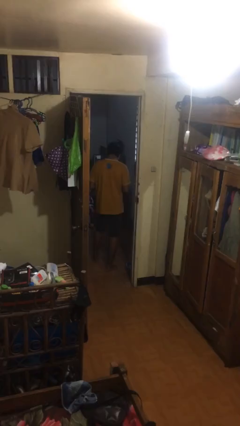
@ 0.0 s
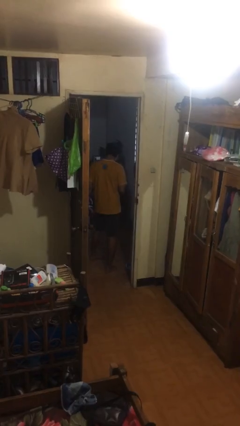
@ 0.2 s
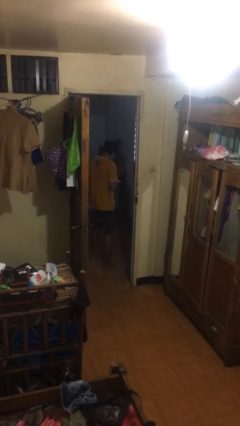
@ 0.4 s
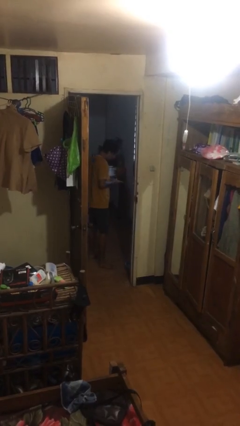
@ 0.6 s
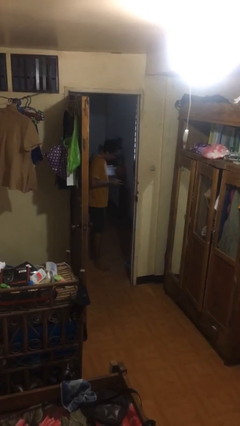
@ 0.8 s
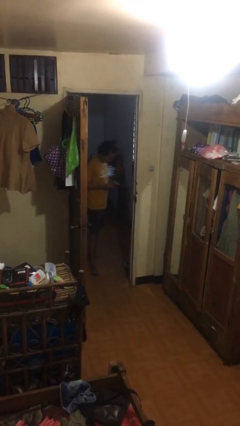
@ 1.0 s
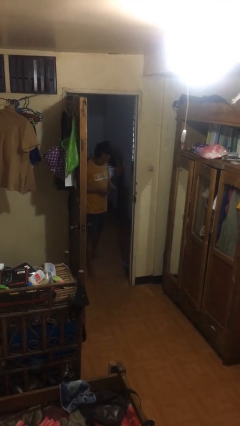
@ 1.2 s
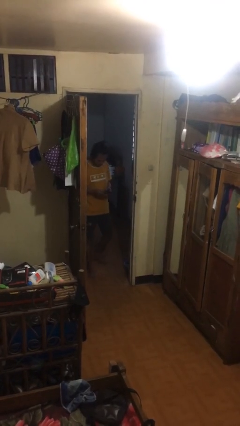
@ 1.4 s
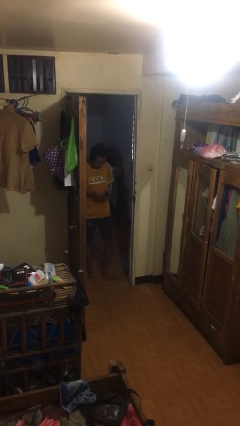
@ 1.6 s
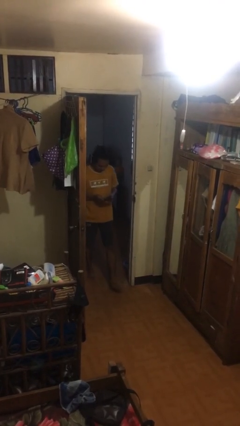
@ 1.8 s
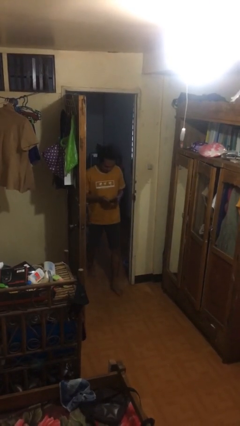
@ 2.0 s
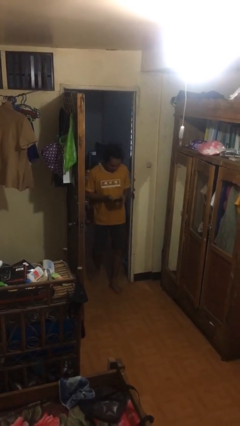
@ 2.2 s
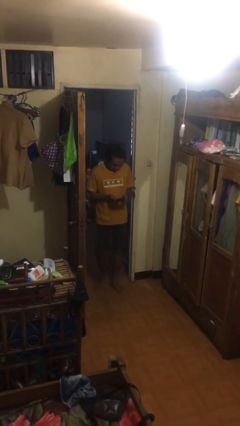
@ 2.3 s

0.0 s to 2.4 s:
person enters scene through structure

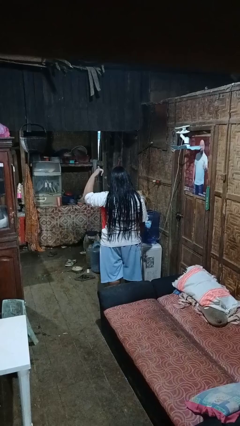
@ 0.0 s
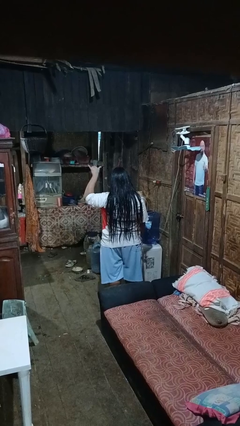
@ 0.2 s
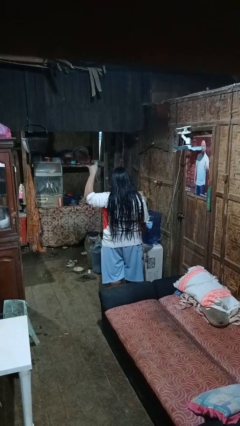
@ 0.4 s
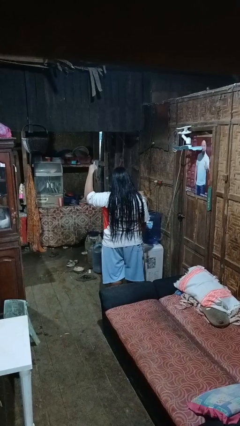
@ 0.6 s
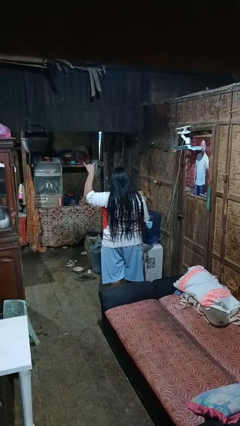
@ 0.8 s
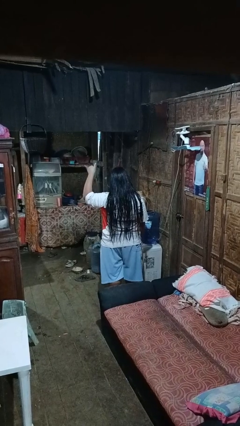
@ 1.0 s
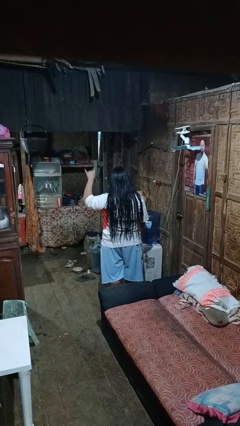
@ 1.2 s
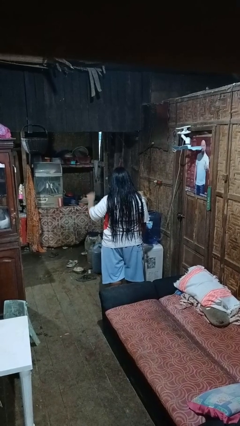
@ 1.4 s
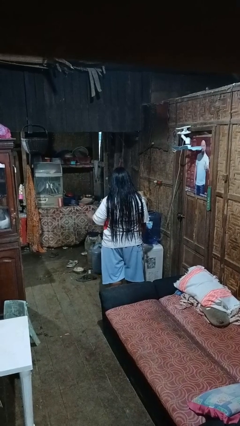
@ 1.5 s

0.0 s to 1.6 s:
person gestures hang loose

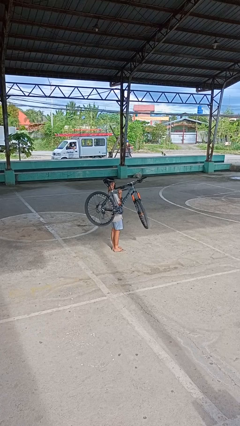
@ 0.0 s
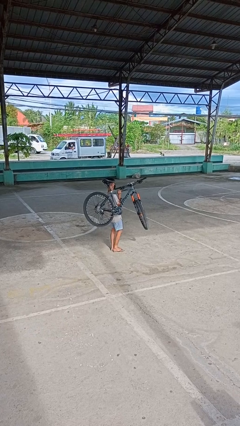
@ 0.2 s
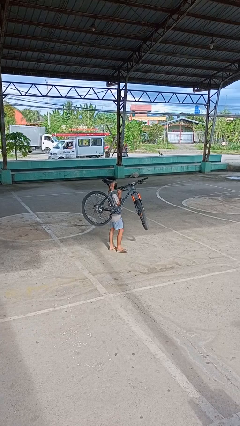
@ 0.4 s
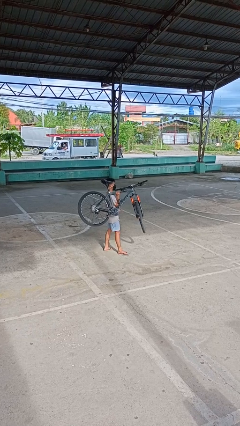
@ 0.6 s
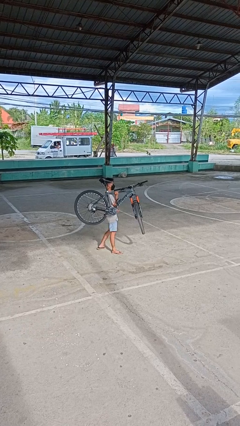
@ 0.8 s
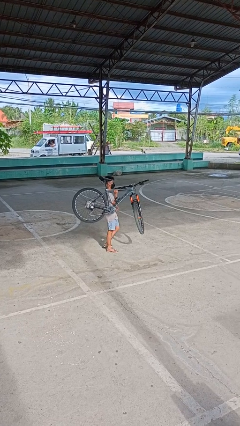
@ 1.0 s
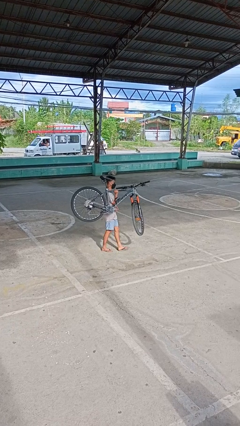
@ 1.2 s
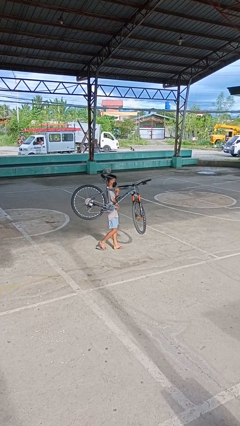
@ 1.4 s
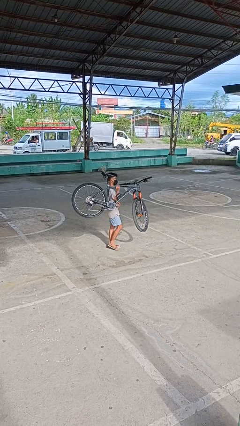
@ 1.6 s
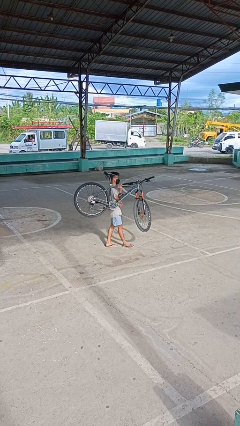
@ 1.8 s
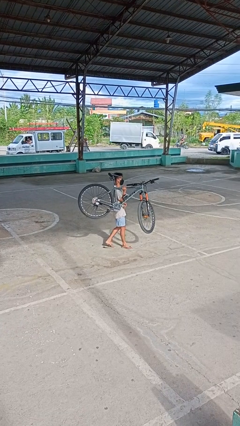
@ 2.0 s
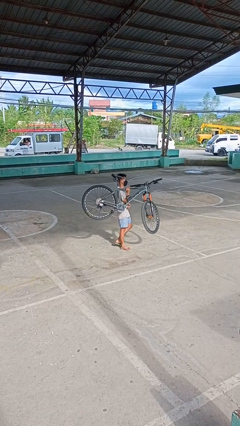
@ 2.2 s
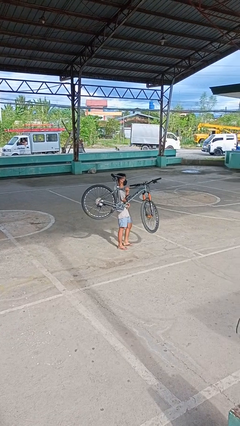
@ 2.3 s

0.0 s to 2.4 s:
person carries bicycle

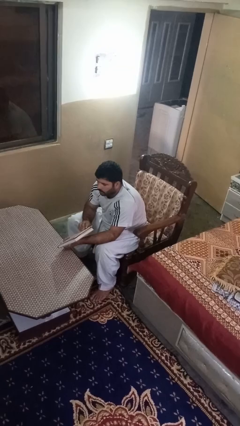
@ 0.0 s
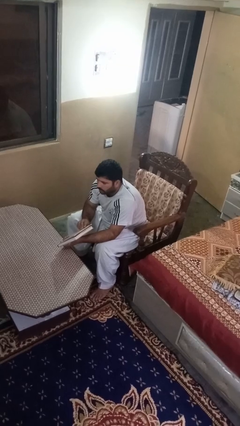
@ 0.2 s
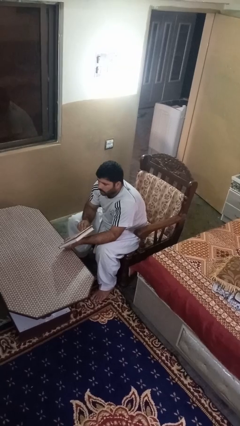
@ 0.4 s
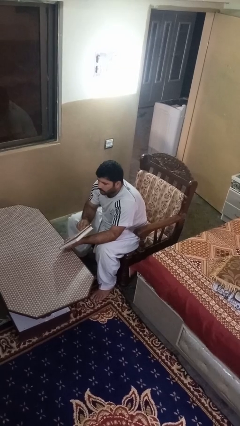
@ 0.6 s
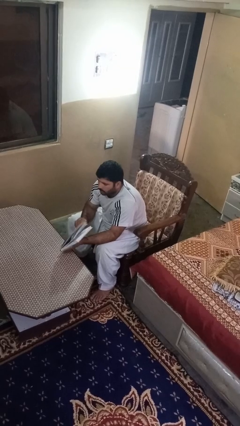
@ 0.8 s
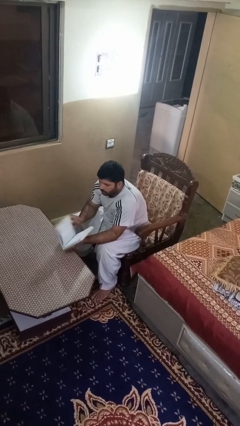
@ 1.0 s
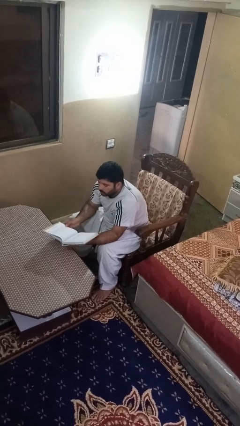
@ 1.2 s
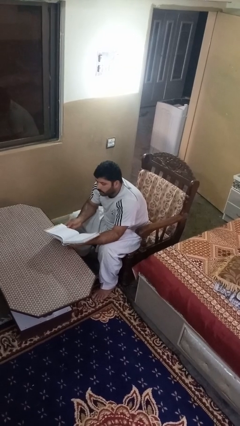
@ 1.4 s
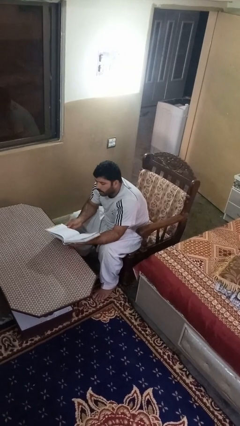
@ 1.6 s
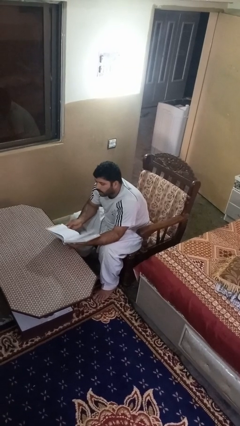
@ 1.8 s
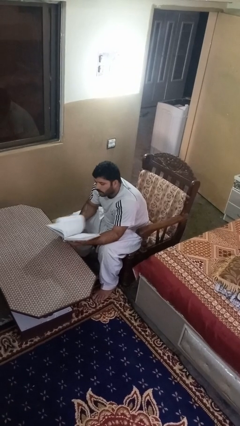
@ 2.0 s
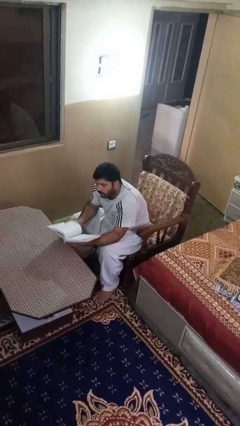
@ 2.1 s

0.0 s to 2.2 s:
person reads book

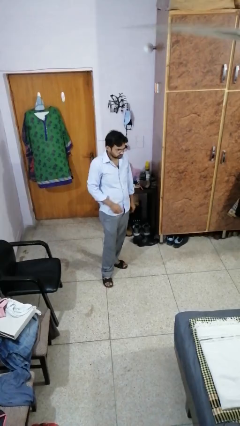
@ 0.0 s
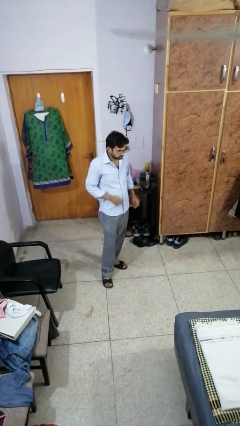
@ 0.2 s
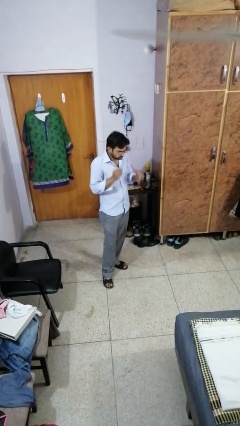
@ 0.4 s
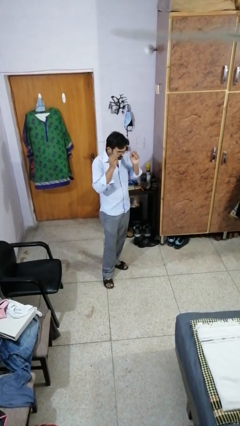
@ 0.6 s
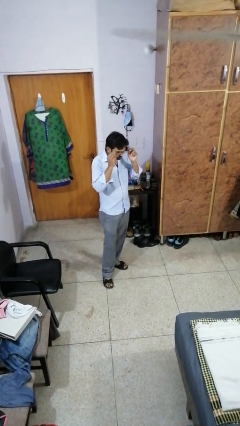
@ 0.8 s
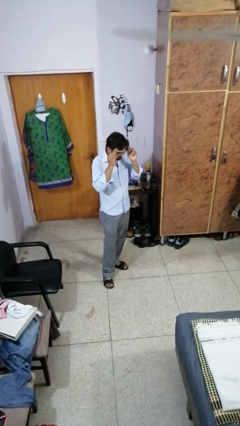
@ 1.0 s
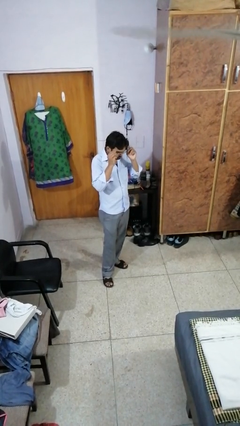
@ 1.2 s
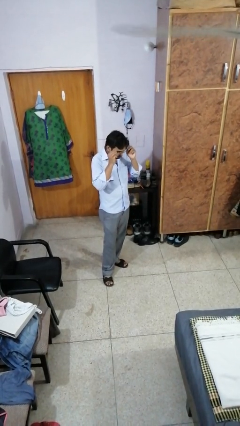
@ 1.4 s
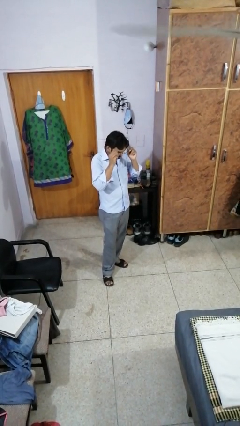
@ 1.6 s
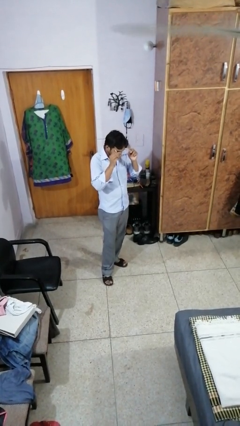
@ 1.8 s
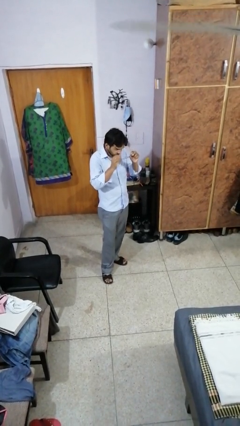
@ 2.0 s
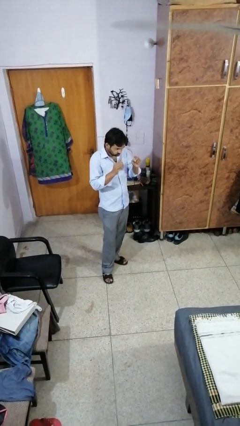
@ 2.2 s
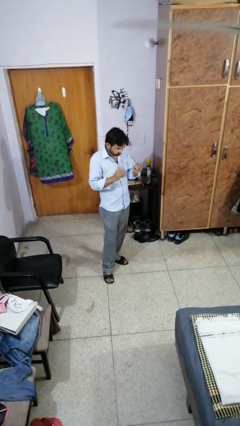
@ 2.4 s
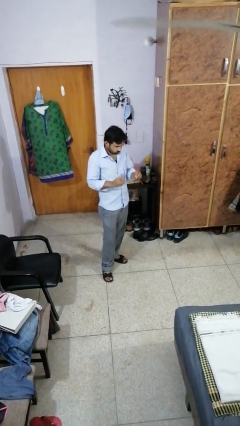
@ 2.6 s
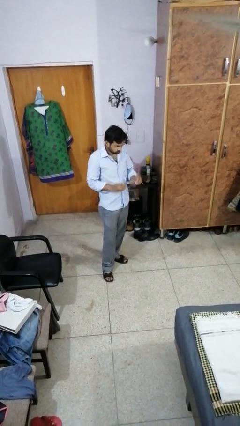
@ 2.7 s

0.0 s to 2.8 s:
person takes off glasses

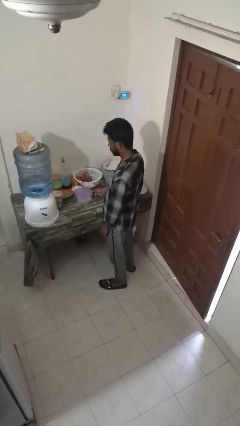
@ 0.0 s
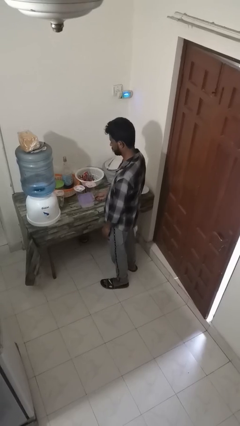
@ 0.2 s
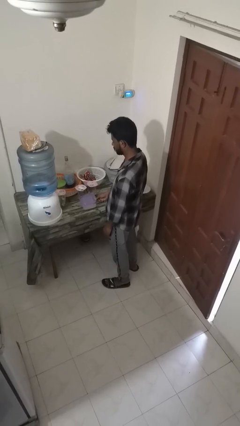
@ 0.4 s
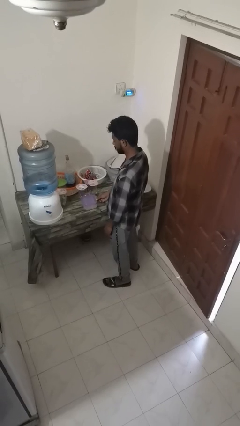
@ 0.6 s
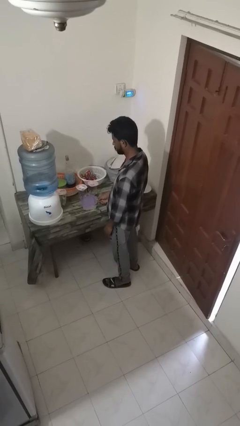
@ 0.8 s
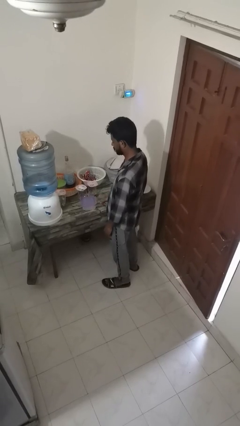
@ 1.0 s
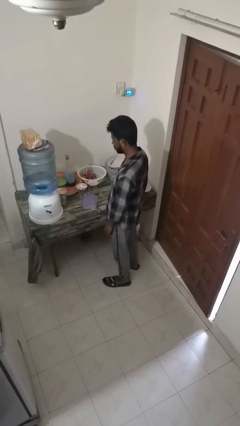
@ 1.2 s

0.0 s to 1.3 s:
person puts down object on countertop

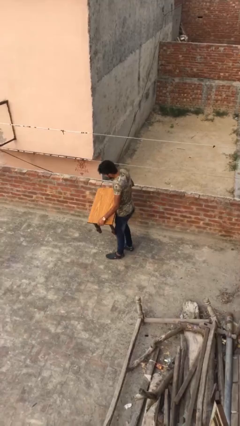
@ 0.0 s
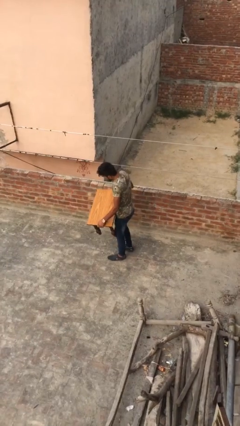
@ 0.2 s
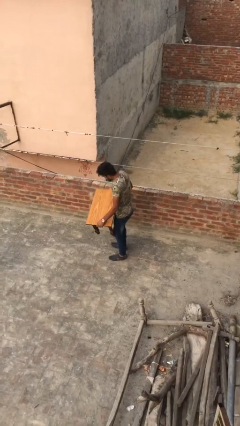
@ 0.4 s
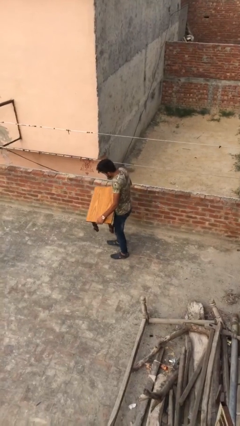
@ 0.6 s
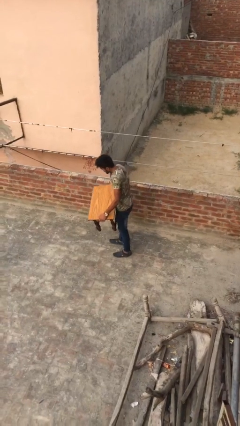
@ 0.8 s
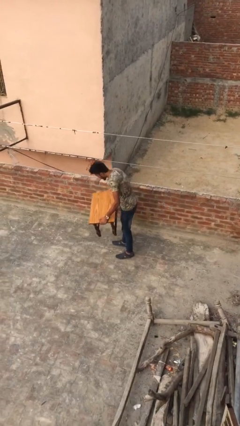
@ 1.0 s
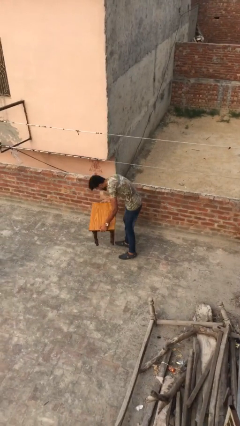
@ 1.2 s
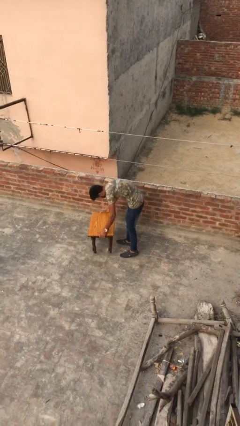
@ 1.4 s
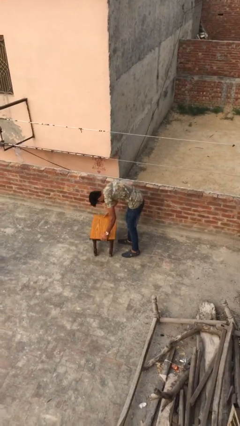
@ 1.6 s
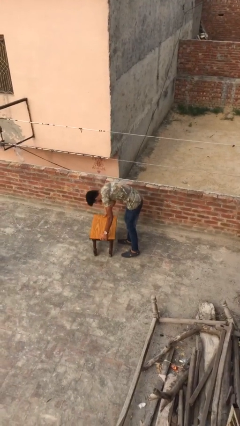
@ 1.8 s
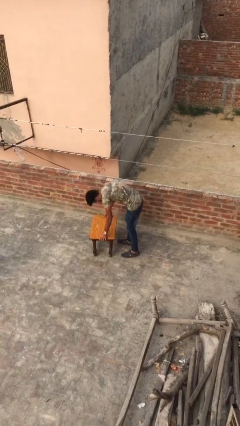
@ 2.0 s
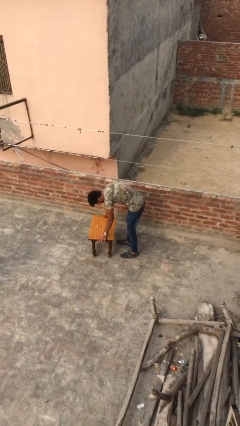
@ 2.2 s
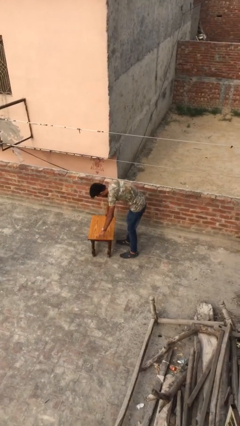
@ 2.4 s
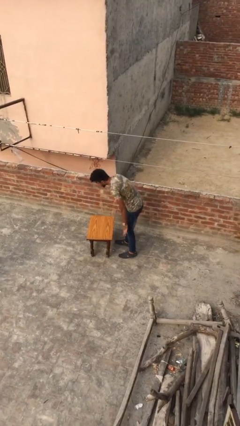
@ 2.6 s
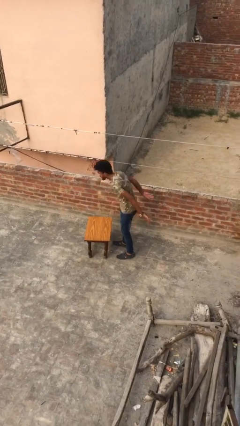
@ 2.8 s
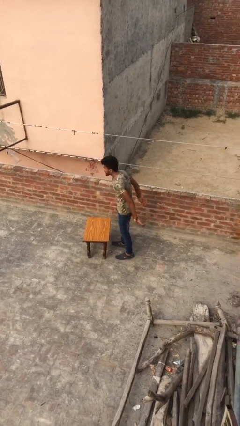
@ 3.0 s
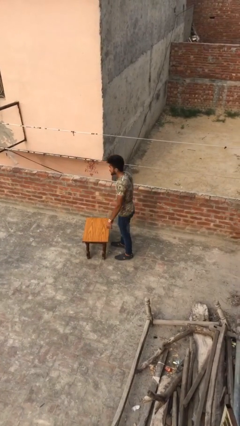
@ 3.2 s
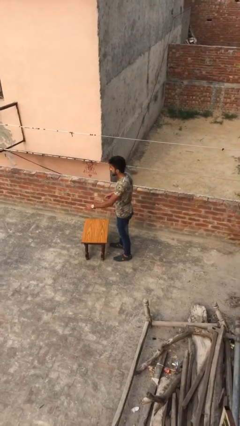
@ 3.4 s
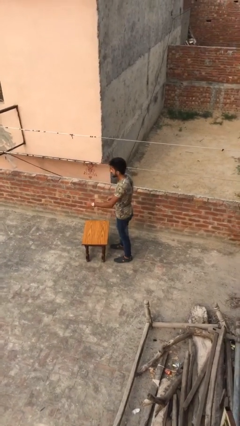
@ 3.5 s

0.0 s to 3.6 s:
person puts down object on floor

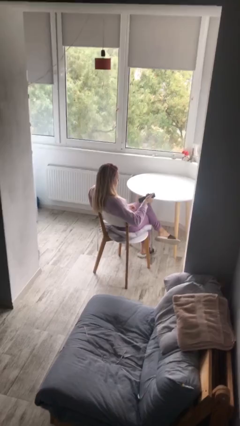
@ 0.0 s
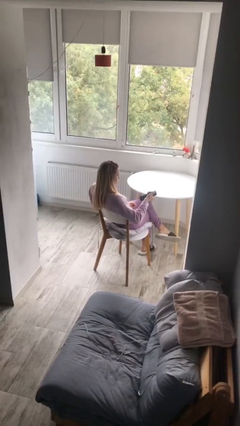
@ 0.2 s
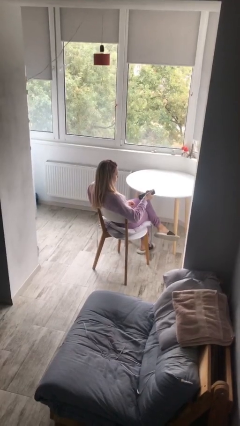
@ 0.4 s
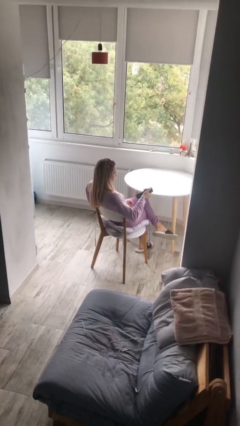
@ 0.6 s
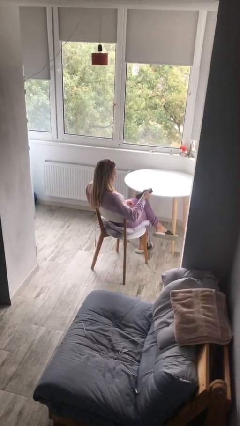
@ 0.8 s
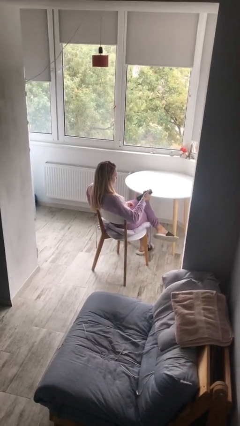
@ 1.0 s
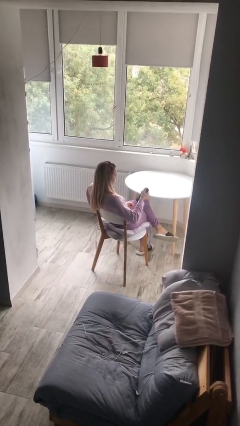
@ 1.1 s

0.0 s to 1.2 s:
person uses television remote
